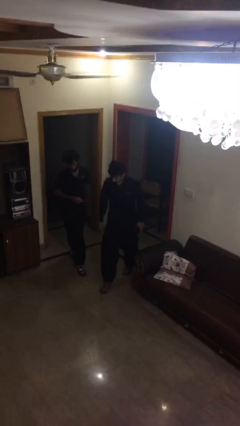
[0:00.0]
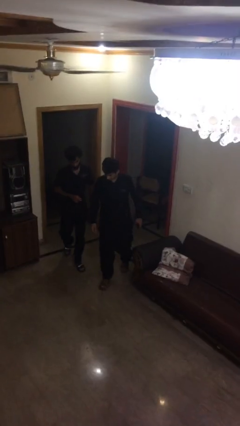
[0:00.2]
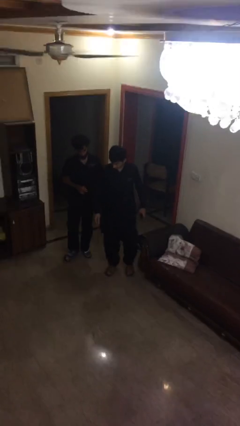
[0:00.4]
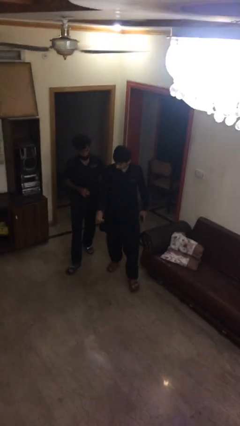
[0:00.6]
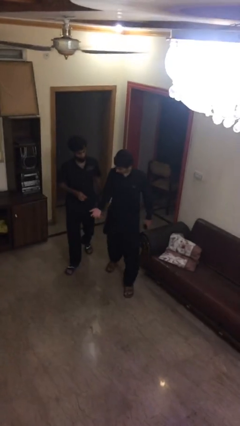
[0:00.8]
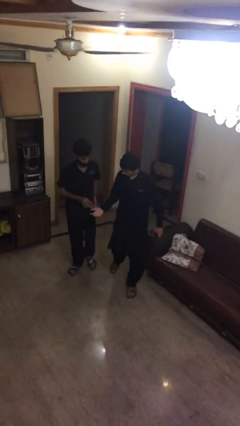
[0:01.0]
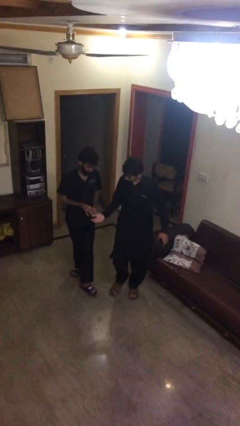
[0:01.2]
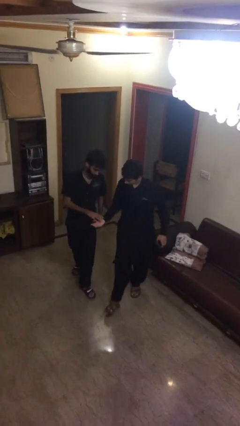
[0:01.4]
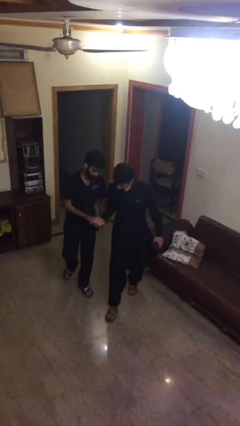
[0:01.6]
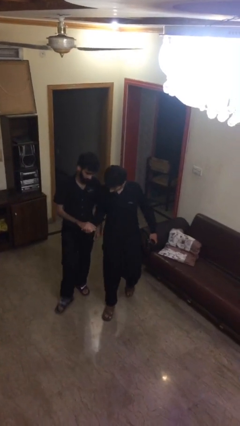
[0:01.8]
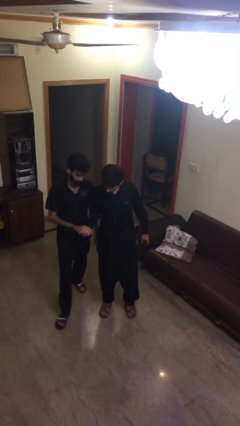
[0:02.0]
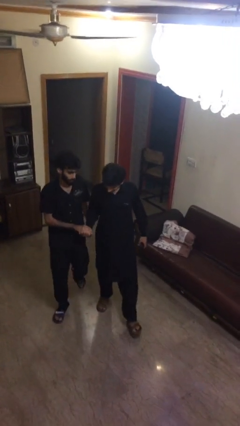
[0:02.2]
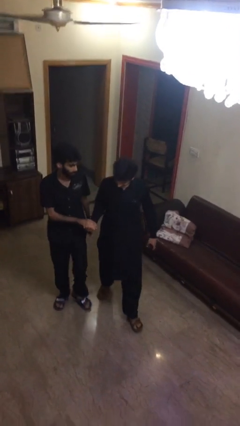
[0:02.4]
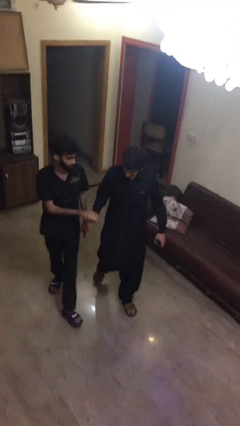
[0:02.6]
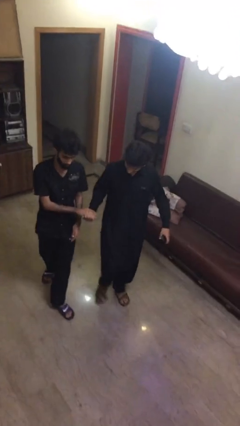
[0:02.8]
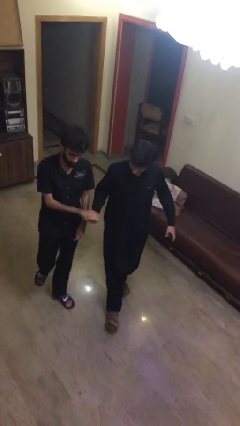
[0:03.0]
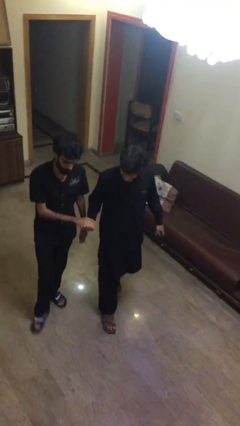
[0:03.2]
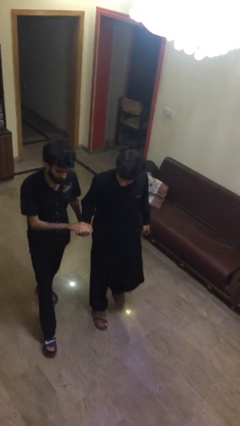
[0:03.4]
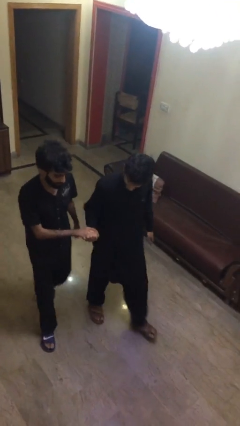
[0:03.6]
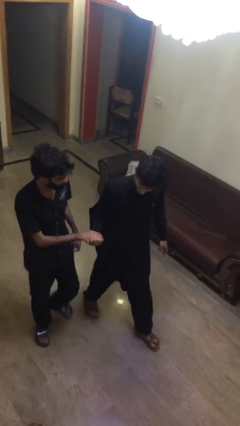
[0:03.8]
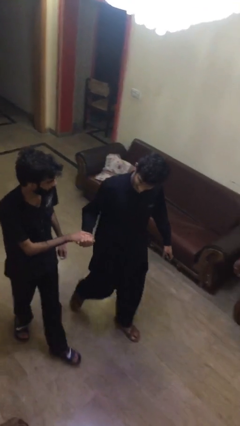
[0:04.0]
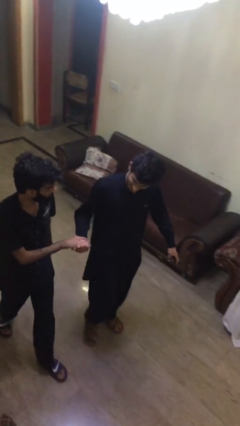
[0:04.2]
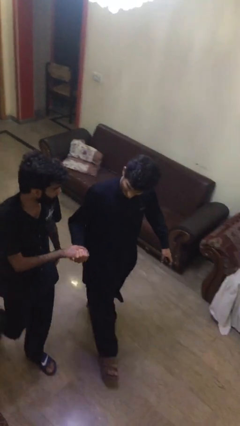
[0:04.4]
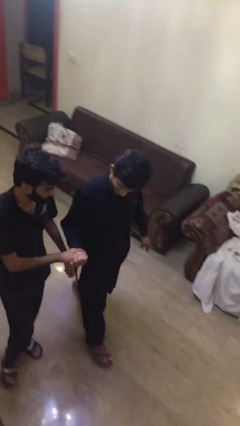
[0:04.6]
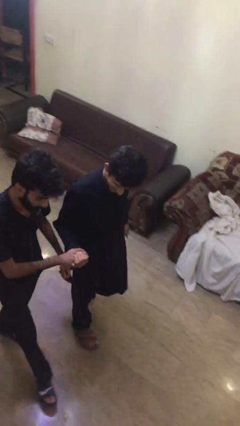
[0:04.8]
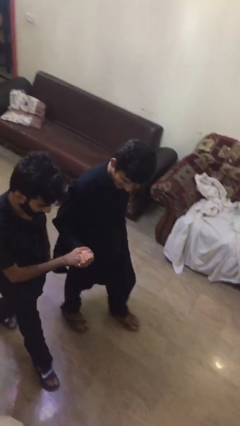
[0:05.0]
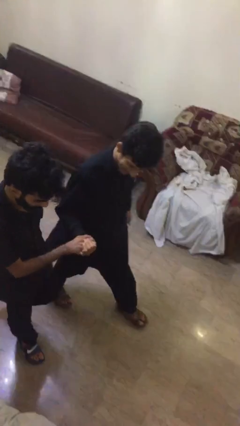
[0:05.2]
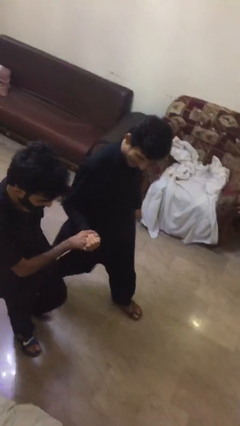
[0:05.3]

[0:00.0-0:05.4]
person holds hand

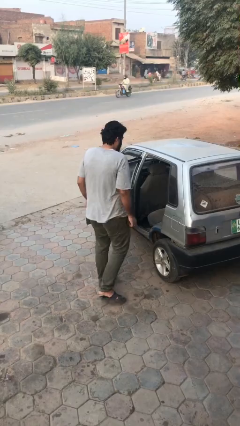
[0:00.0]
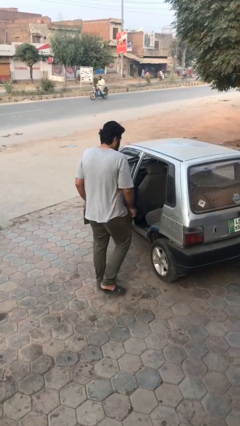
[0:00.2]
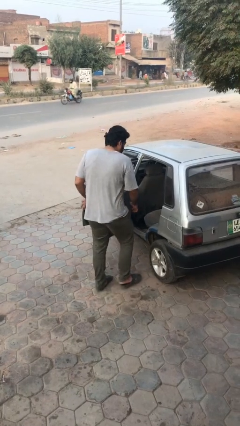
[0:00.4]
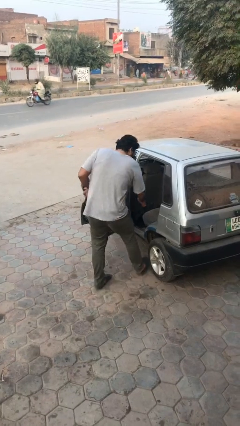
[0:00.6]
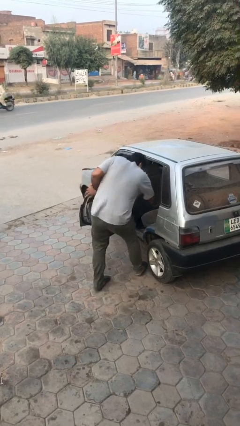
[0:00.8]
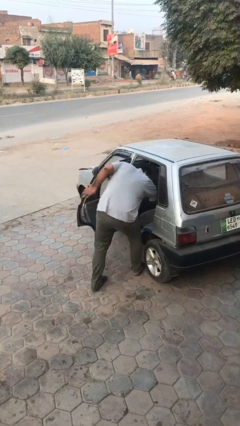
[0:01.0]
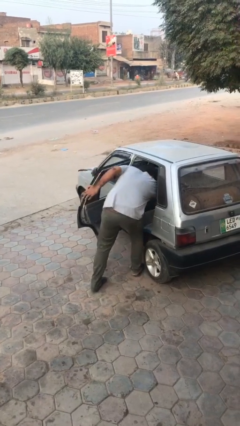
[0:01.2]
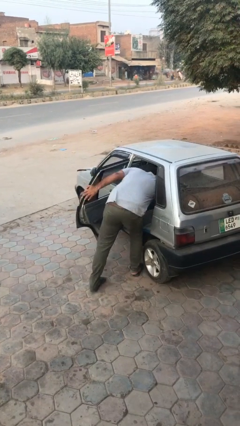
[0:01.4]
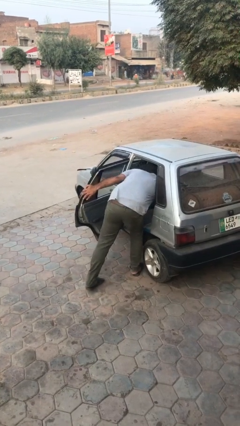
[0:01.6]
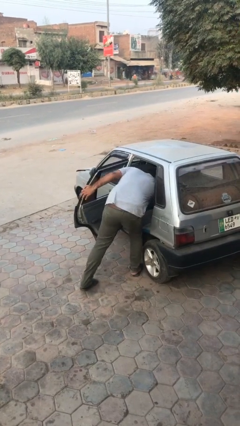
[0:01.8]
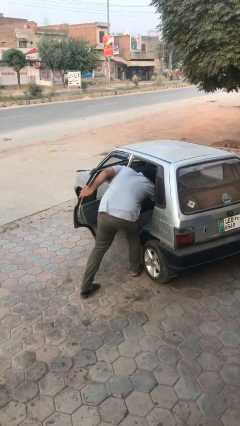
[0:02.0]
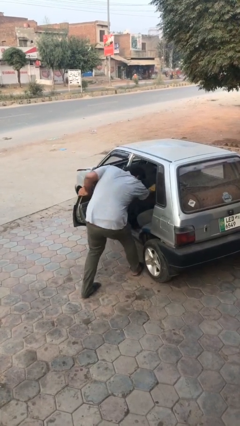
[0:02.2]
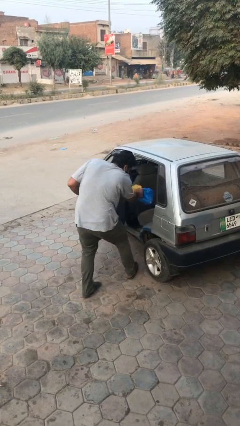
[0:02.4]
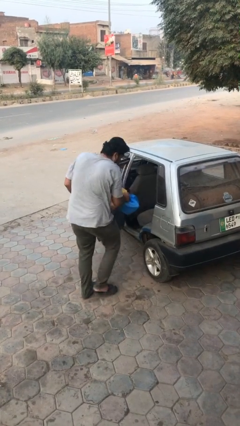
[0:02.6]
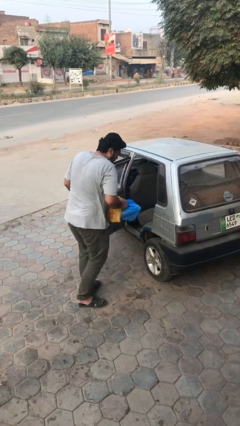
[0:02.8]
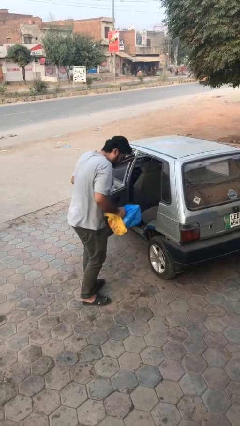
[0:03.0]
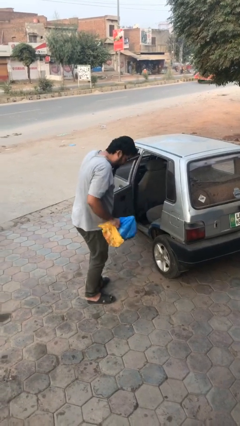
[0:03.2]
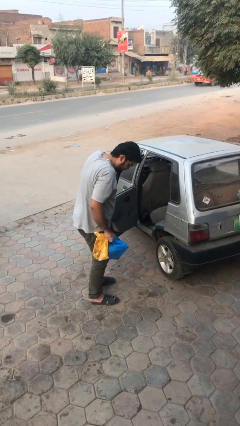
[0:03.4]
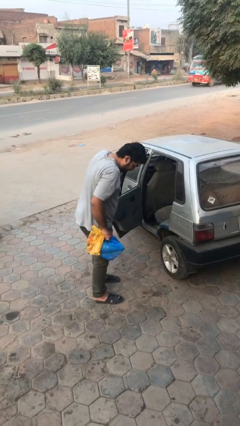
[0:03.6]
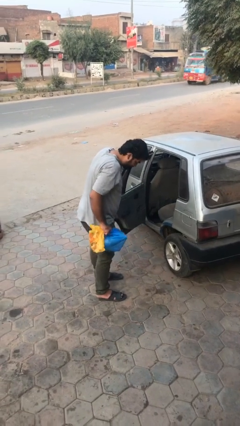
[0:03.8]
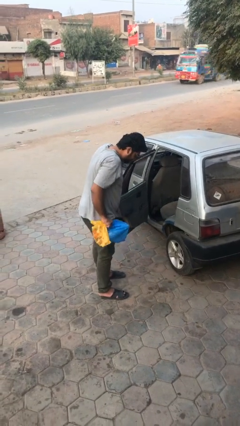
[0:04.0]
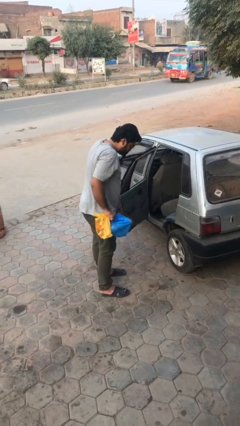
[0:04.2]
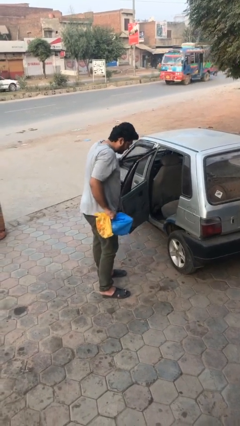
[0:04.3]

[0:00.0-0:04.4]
person unloads car

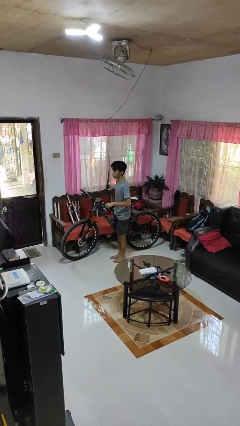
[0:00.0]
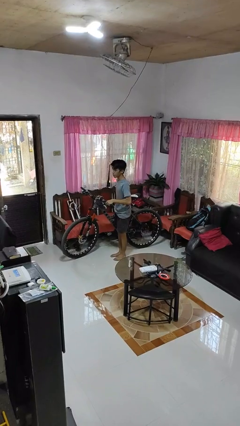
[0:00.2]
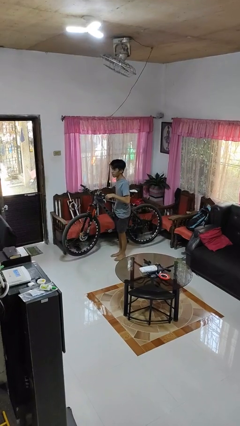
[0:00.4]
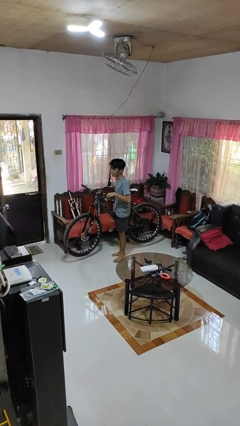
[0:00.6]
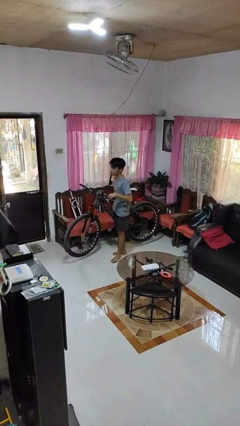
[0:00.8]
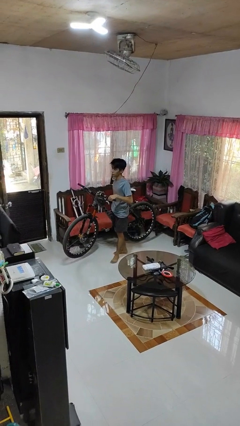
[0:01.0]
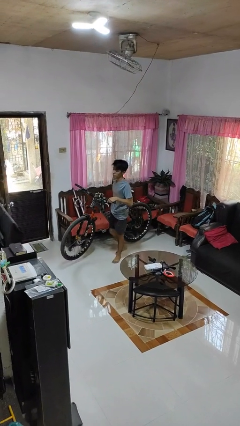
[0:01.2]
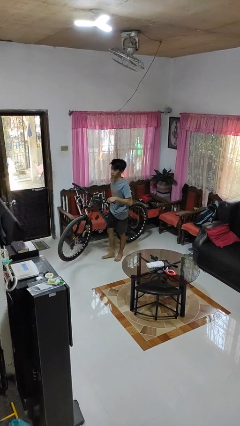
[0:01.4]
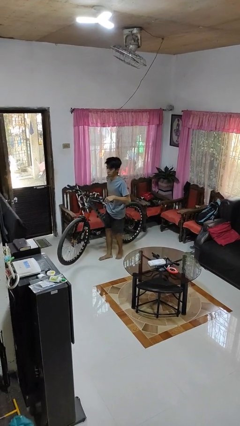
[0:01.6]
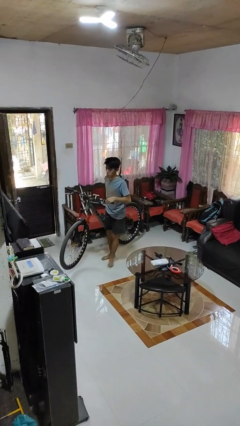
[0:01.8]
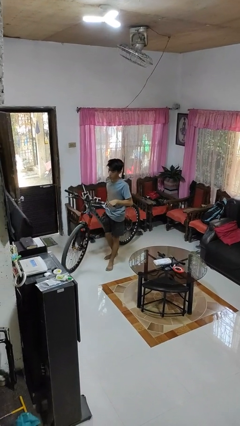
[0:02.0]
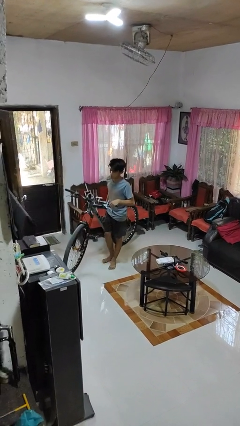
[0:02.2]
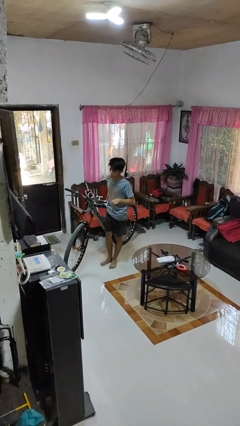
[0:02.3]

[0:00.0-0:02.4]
person carries bicycle

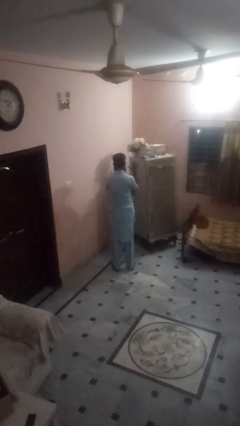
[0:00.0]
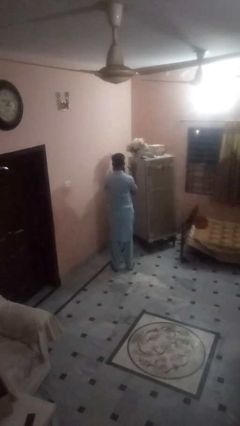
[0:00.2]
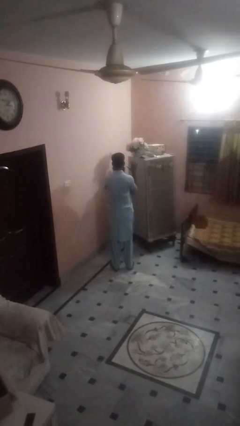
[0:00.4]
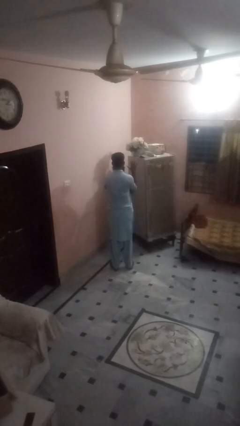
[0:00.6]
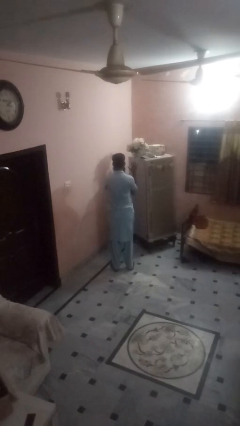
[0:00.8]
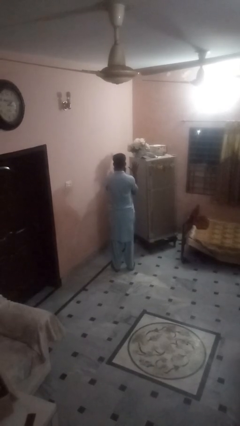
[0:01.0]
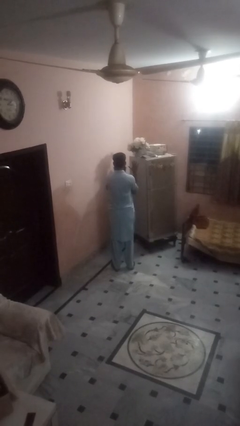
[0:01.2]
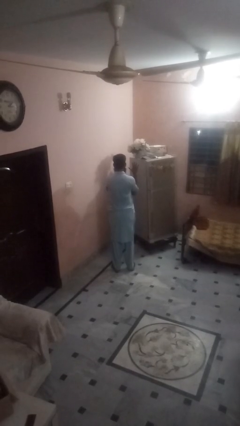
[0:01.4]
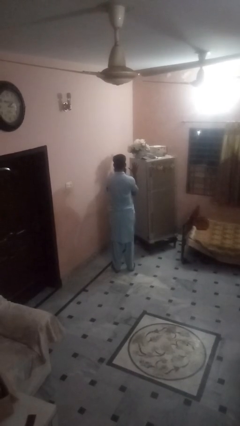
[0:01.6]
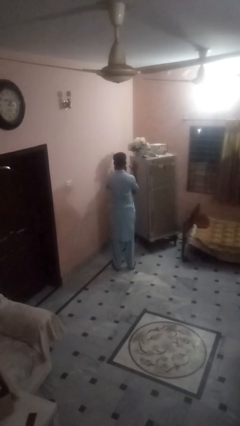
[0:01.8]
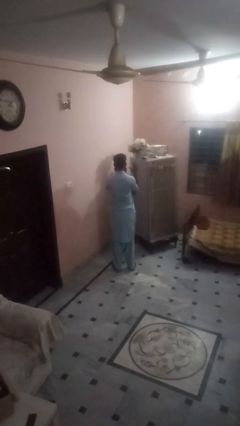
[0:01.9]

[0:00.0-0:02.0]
person gestures number five

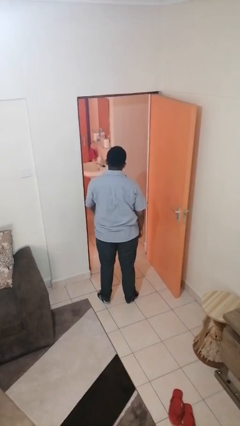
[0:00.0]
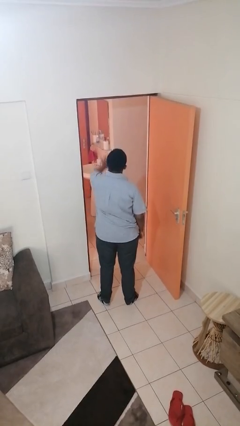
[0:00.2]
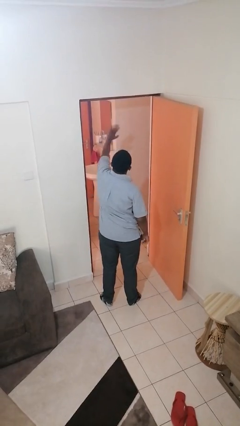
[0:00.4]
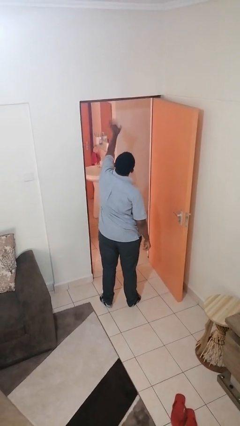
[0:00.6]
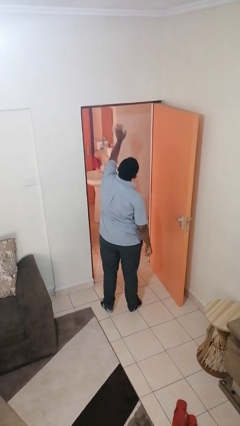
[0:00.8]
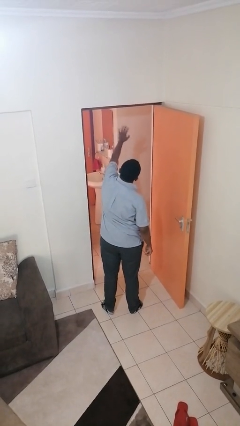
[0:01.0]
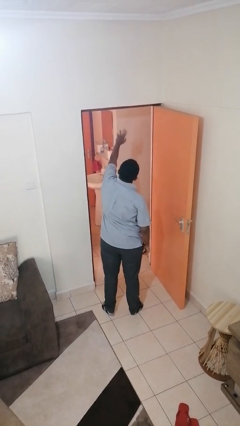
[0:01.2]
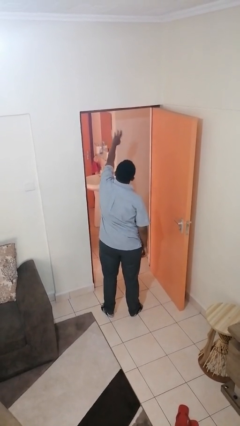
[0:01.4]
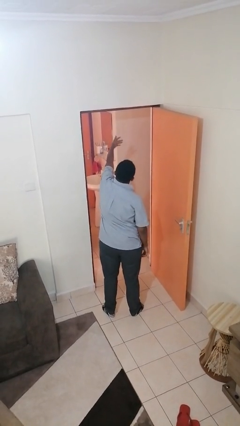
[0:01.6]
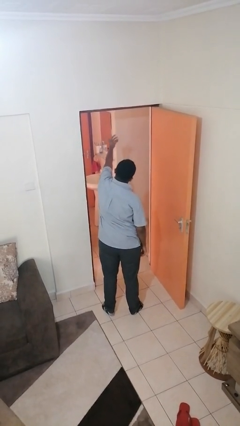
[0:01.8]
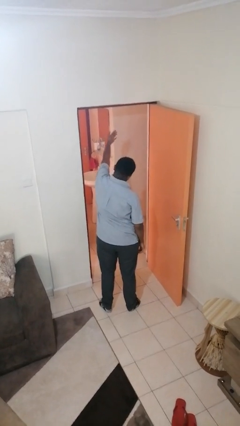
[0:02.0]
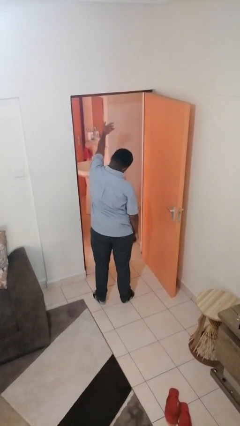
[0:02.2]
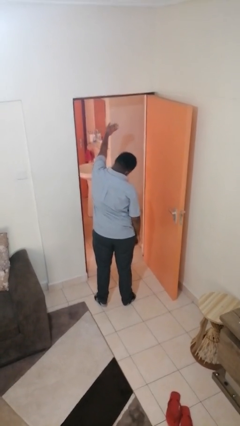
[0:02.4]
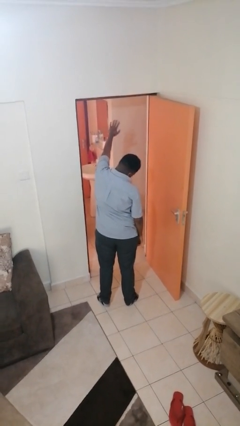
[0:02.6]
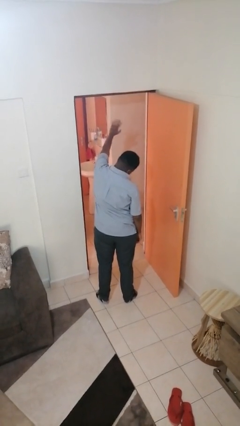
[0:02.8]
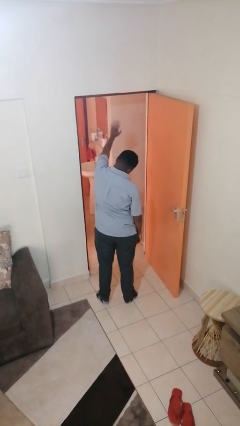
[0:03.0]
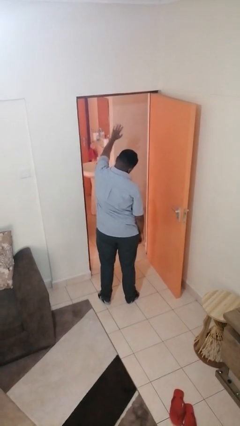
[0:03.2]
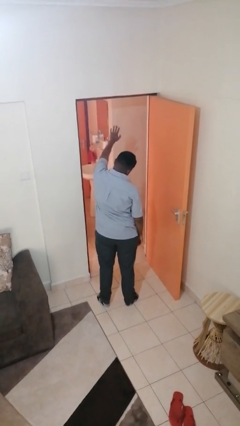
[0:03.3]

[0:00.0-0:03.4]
person waves at person
